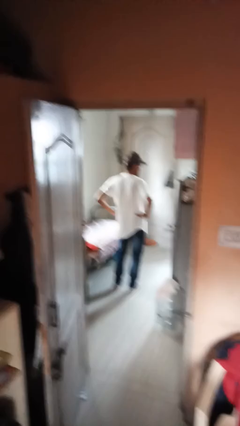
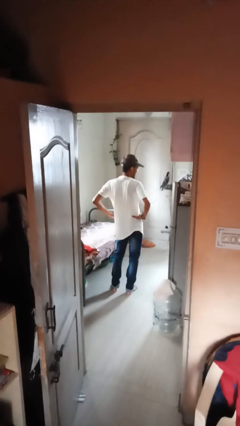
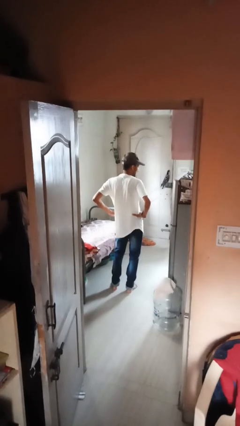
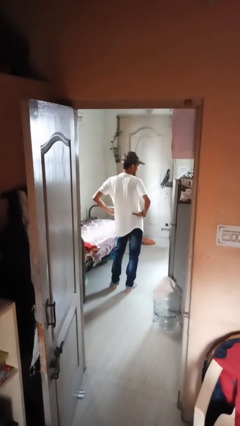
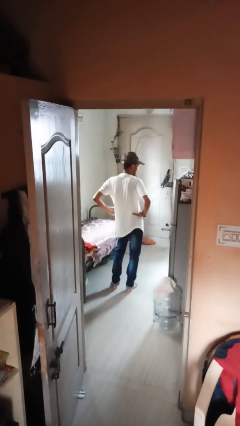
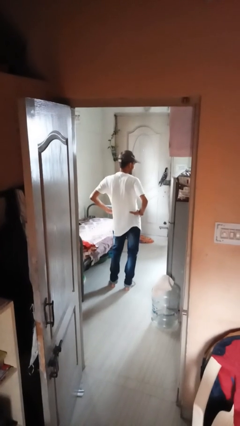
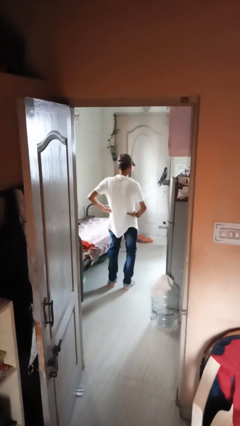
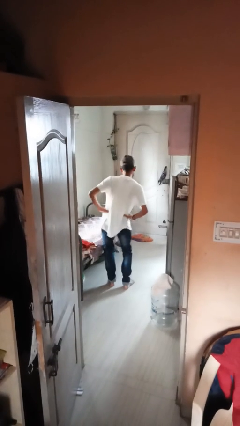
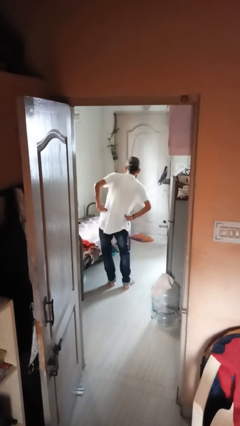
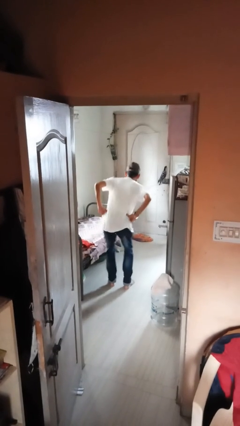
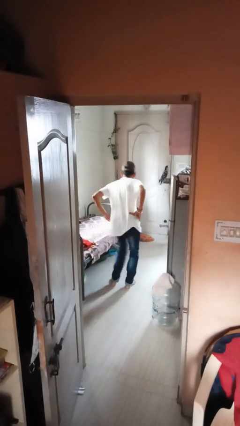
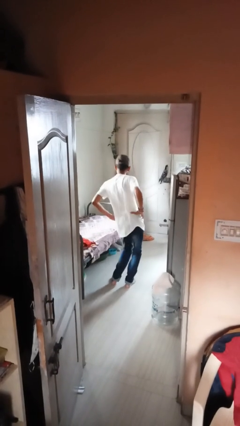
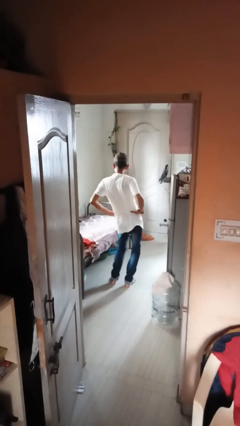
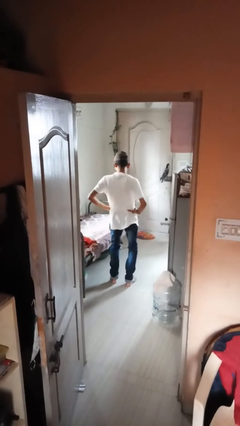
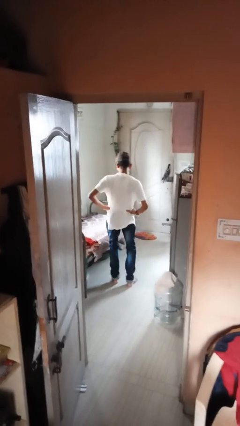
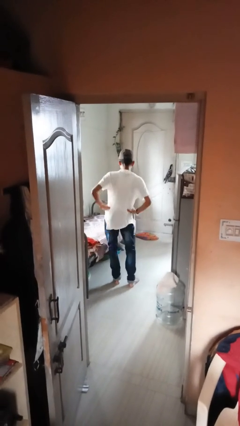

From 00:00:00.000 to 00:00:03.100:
person wiggles hips

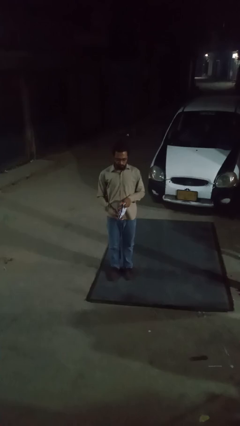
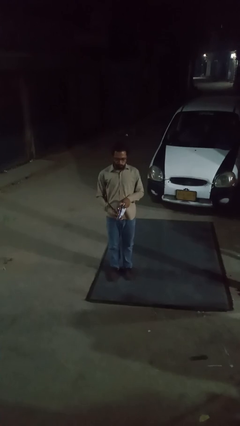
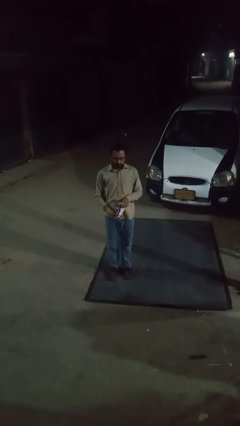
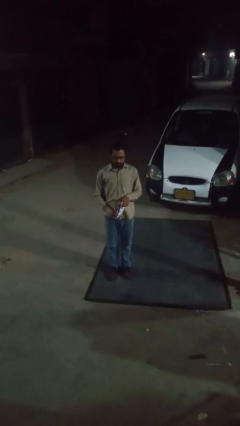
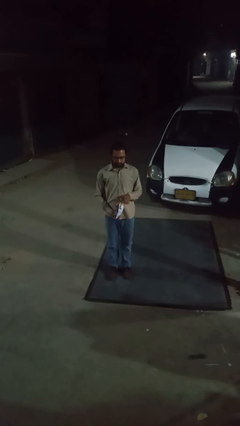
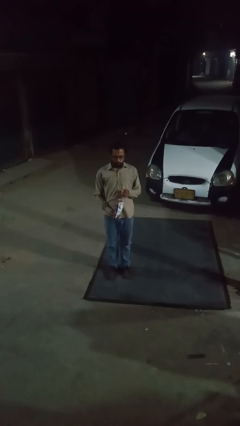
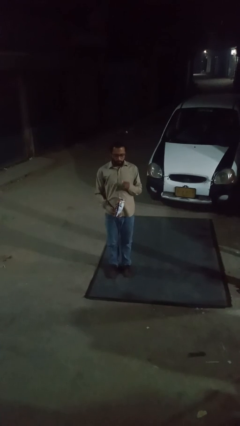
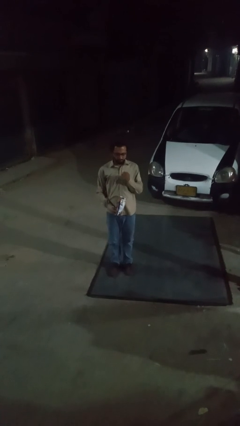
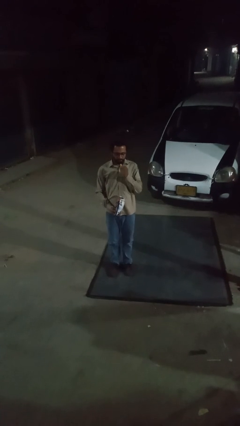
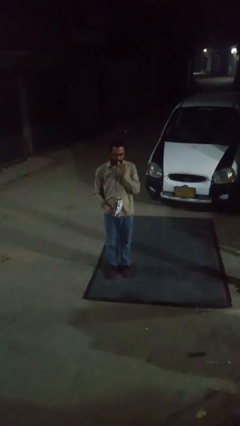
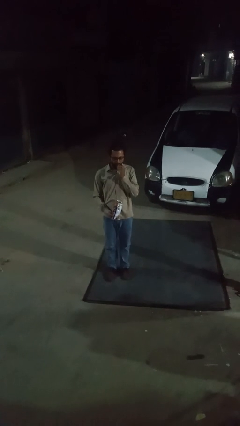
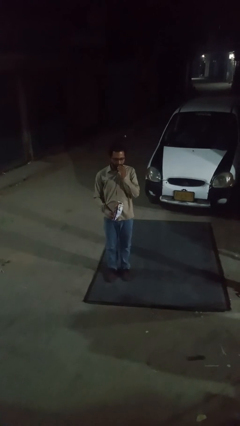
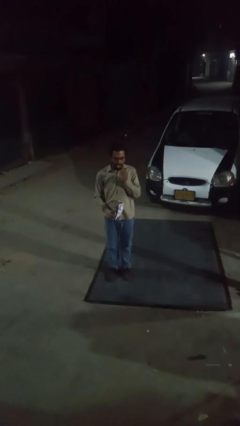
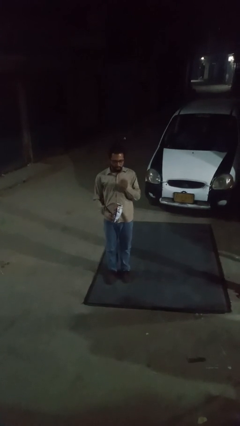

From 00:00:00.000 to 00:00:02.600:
person eats snack from bag

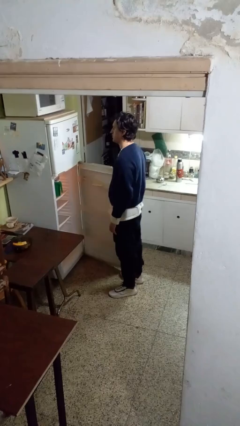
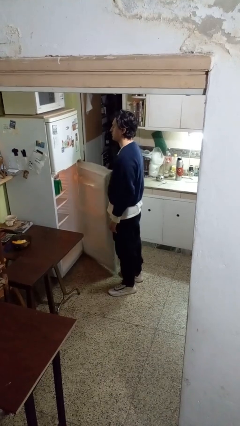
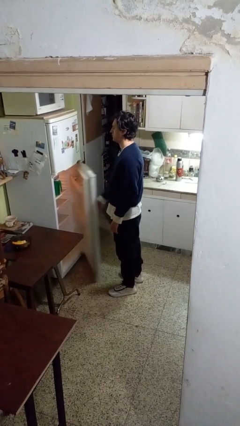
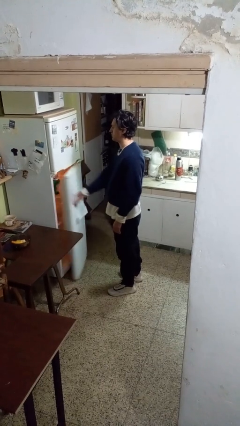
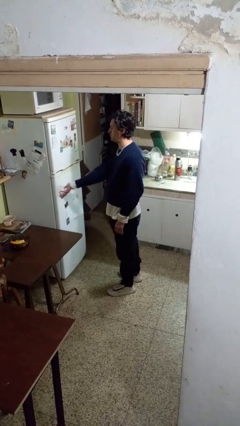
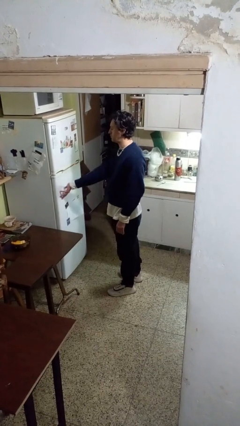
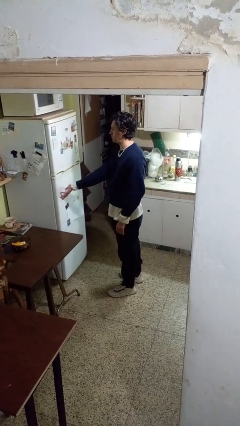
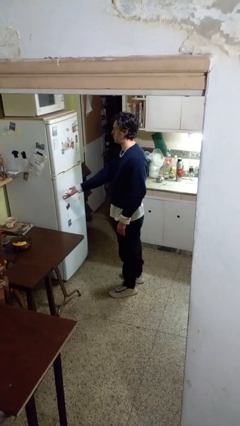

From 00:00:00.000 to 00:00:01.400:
person closes refrigerator

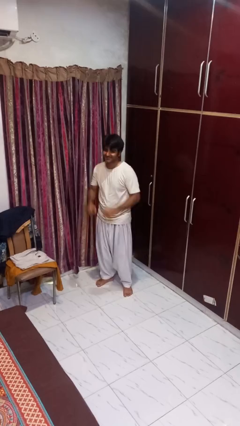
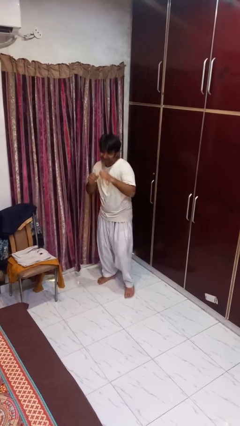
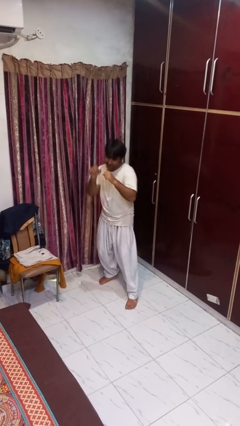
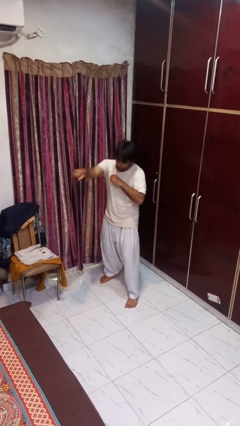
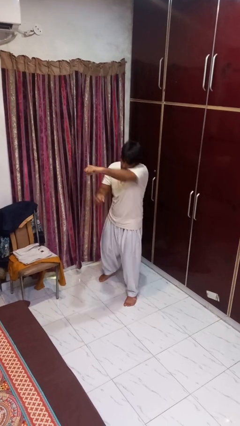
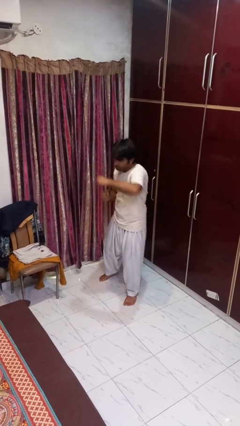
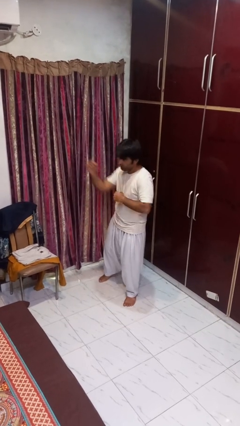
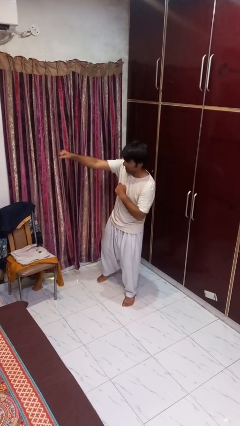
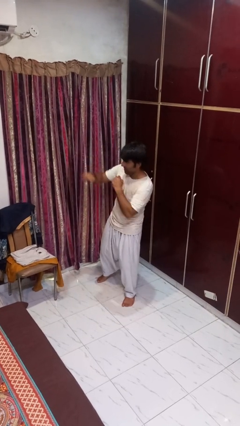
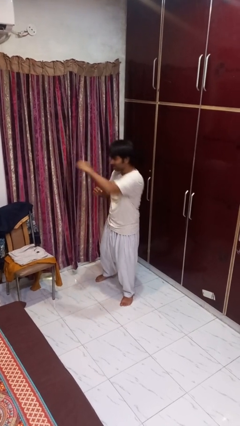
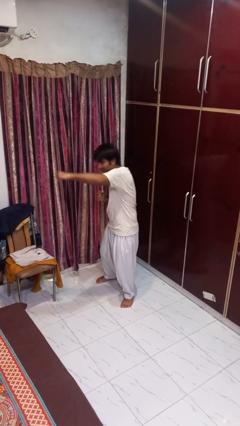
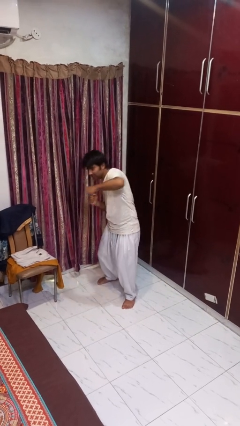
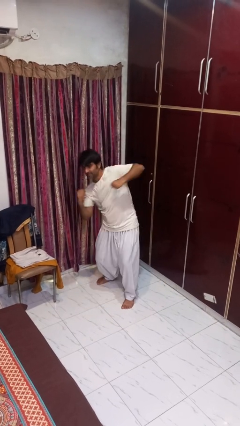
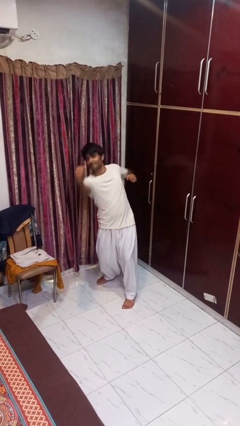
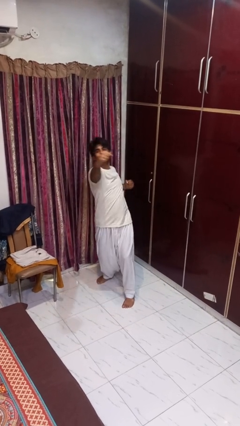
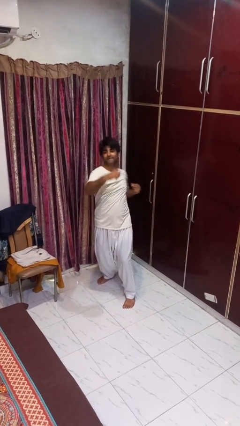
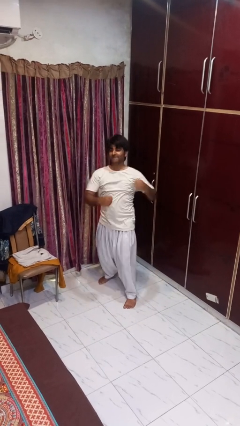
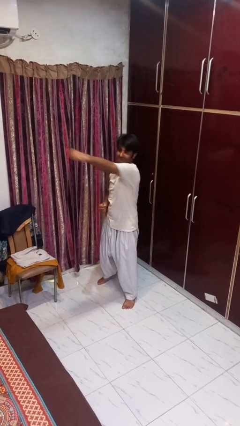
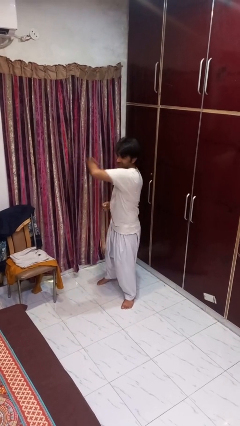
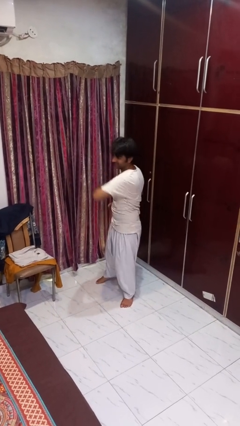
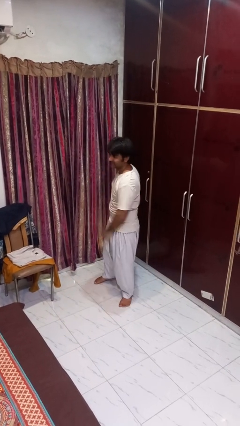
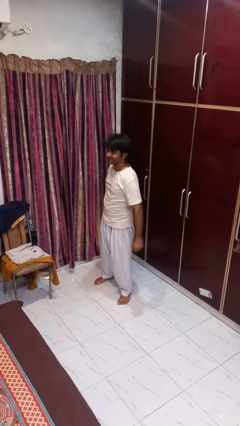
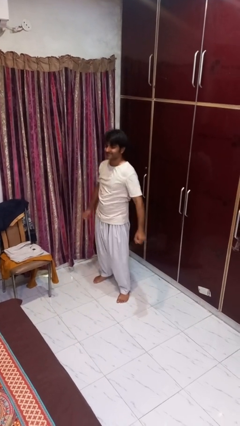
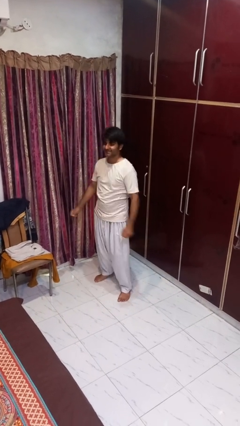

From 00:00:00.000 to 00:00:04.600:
person punches

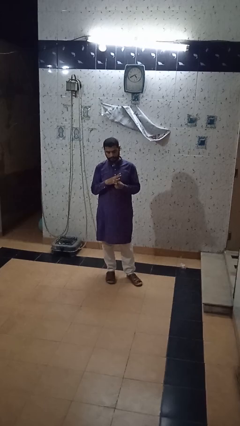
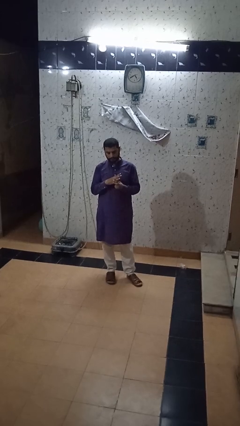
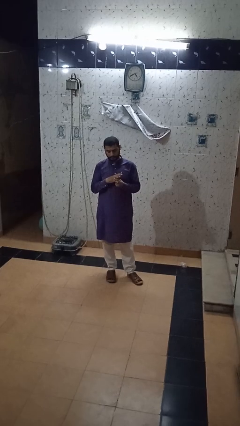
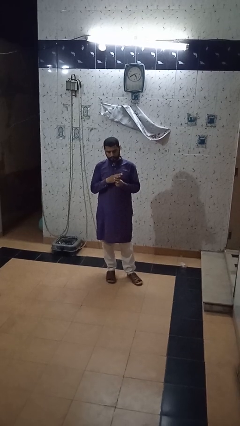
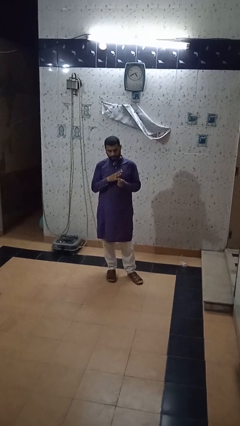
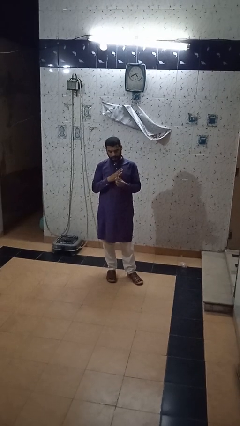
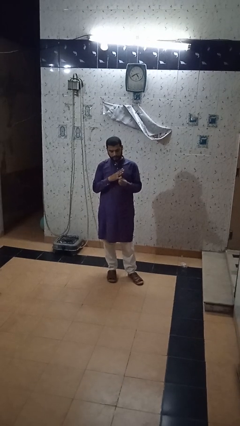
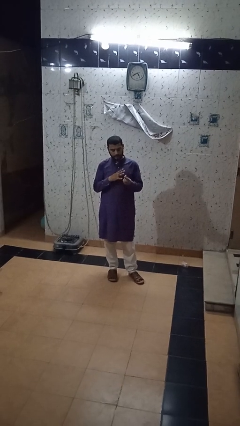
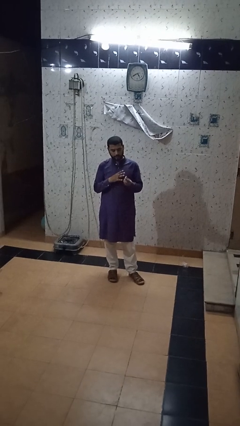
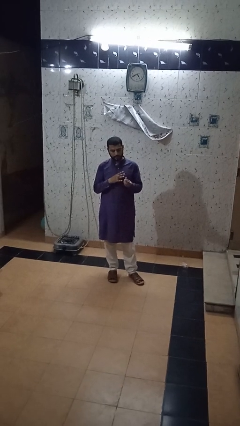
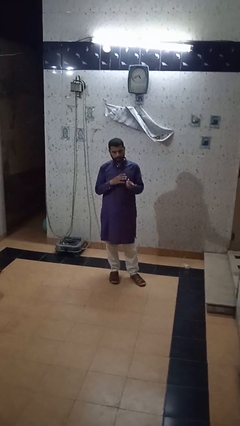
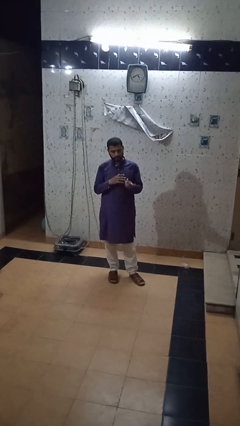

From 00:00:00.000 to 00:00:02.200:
person takes off ring

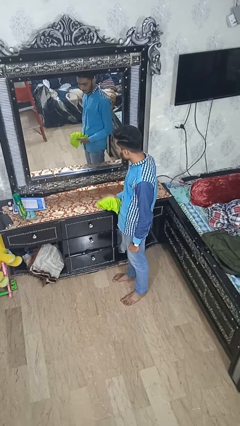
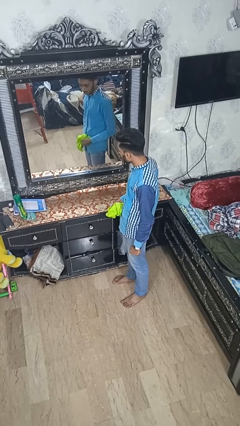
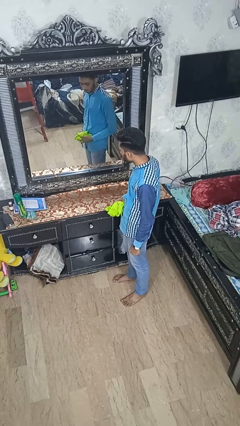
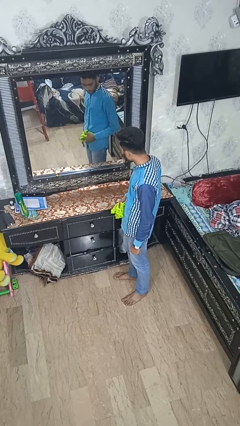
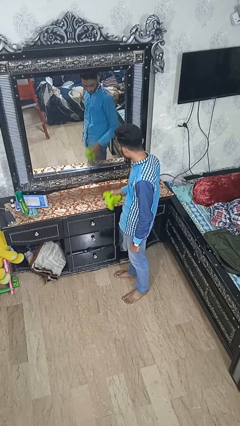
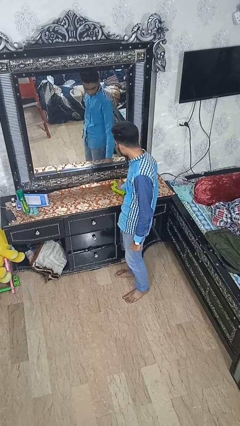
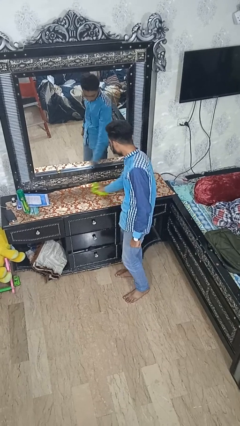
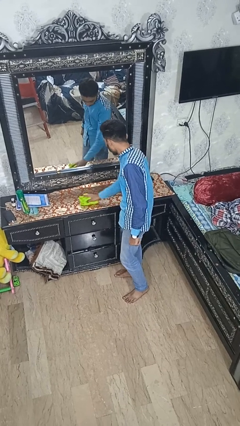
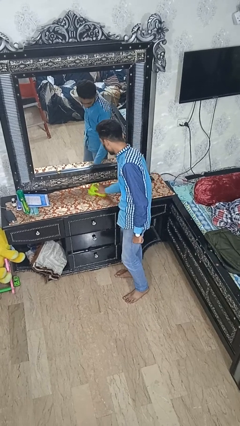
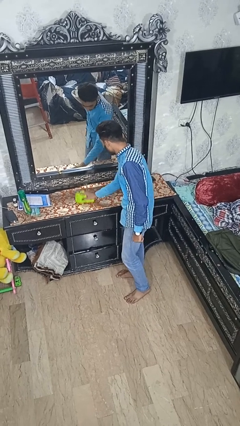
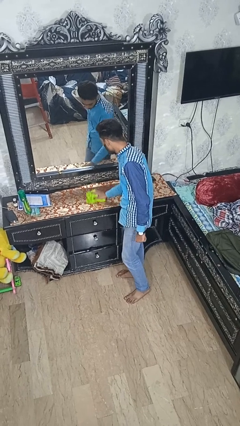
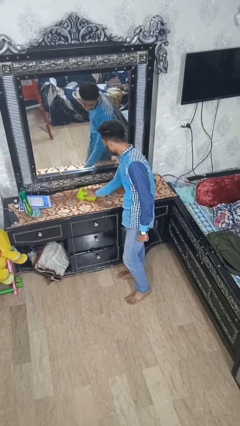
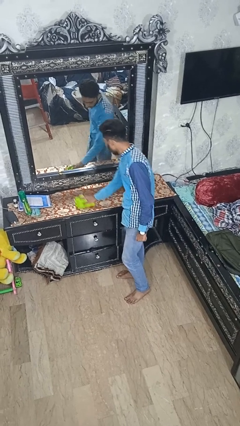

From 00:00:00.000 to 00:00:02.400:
person cleans table with rag

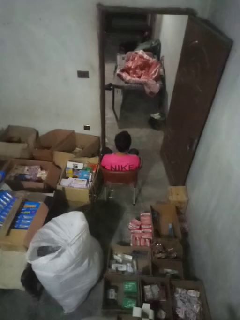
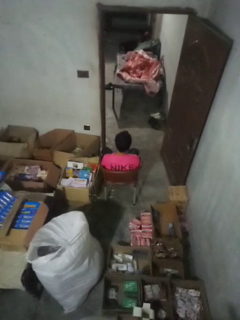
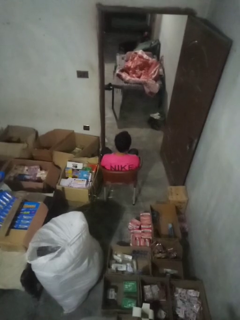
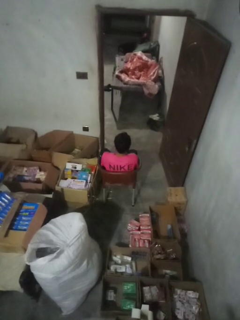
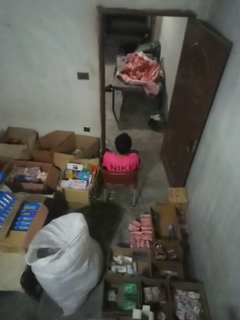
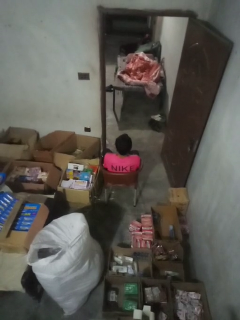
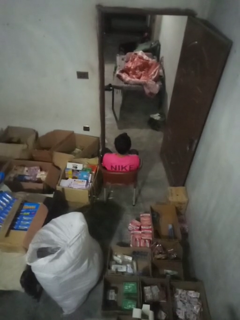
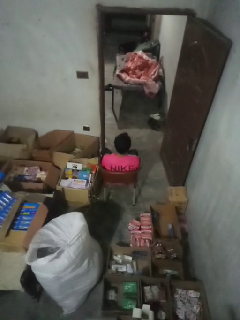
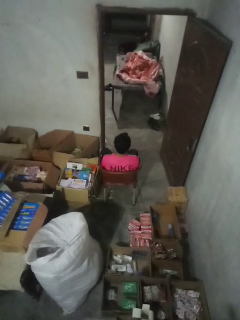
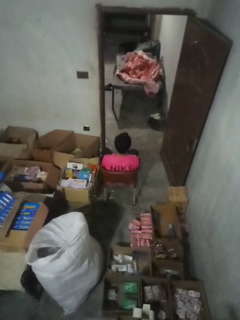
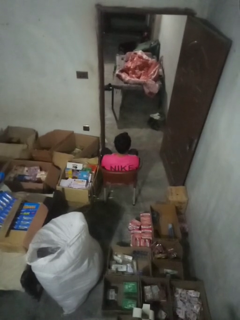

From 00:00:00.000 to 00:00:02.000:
person shrugs
